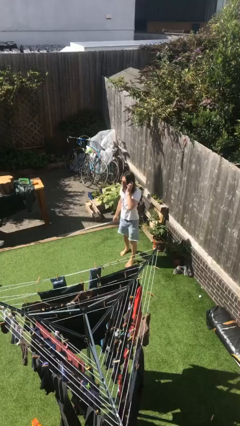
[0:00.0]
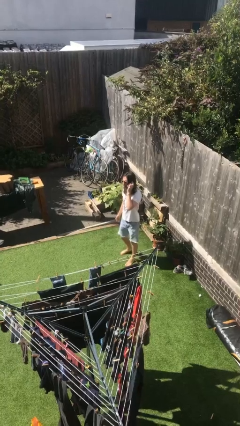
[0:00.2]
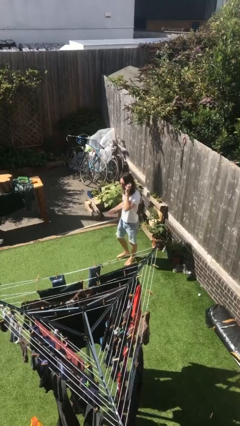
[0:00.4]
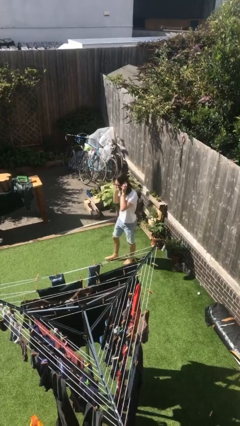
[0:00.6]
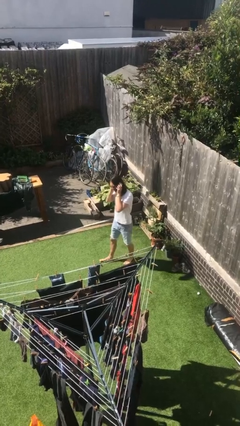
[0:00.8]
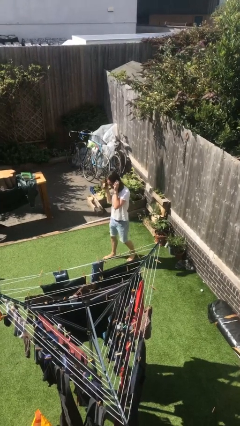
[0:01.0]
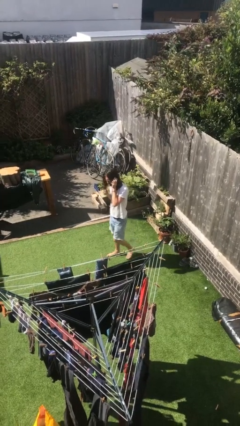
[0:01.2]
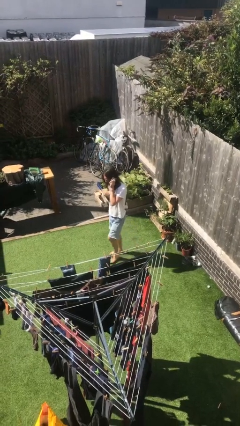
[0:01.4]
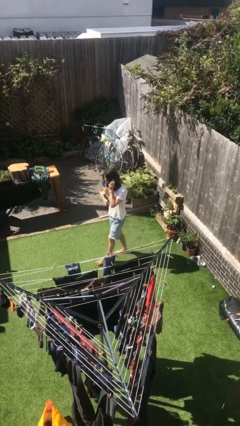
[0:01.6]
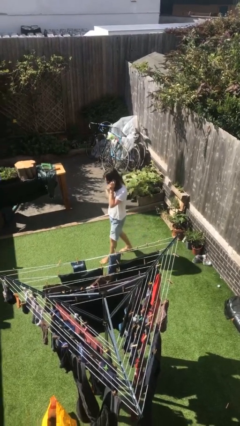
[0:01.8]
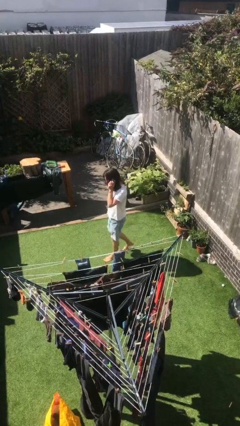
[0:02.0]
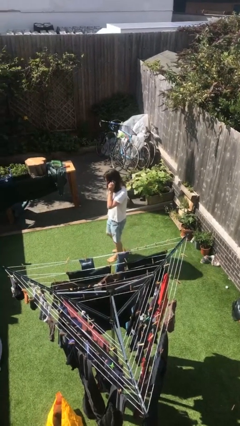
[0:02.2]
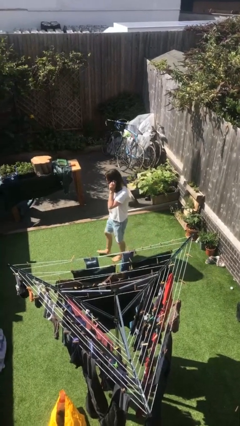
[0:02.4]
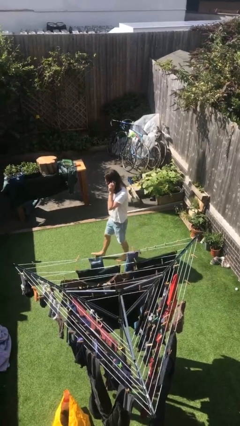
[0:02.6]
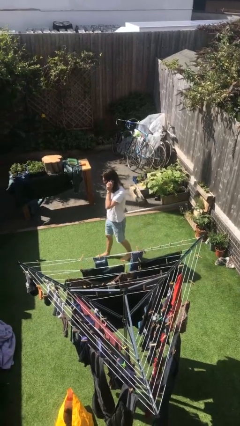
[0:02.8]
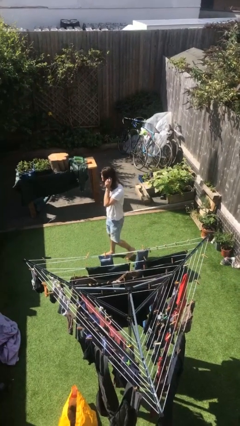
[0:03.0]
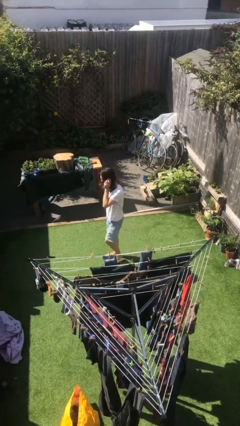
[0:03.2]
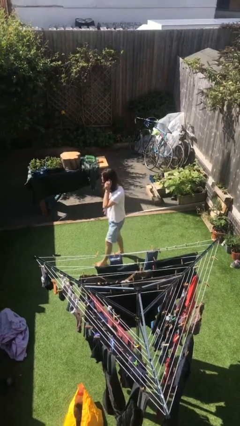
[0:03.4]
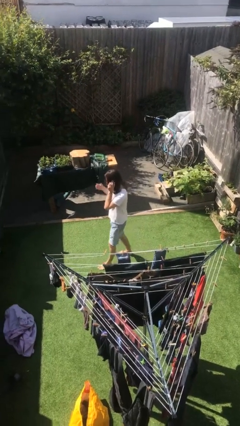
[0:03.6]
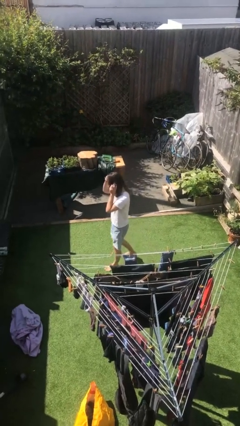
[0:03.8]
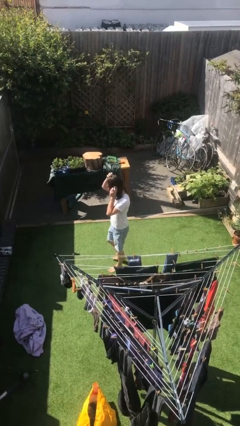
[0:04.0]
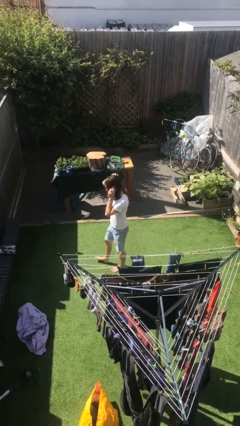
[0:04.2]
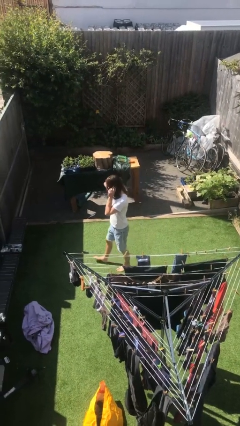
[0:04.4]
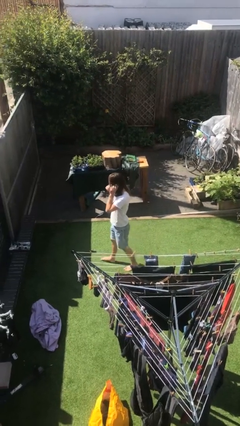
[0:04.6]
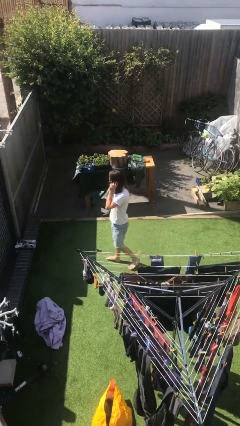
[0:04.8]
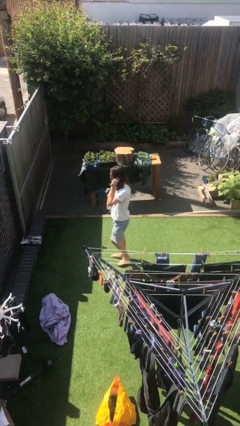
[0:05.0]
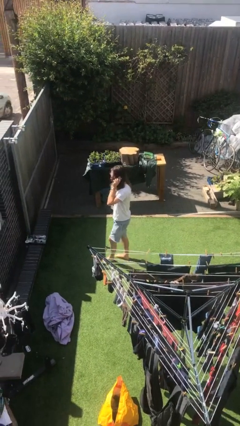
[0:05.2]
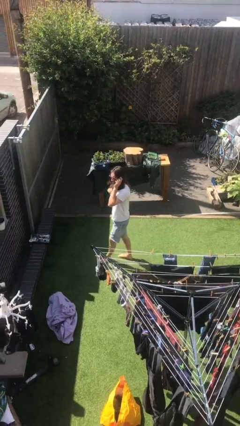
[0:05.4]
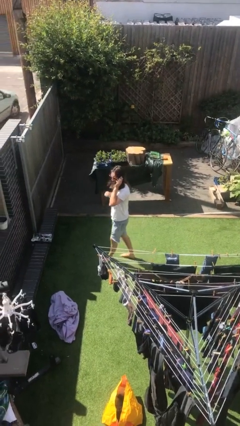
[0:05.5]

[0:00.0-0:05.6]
person talks on phone

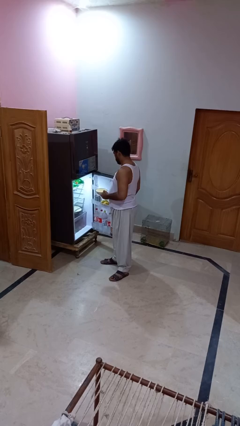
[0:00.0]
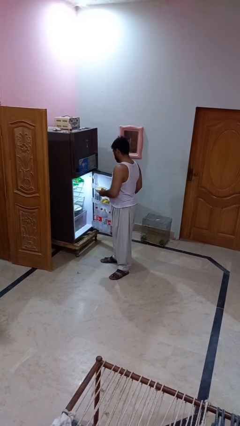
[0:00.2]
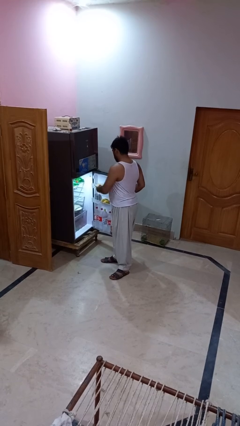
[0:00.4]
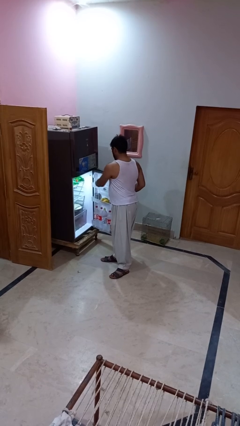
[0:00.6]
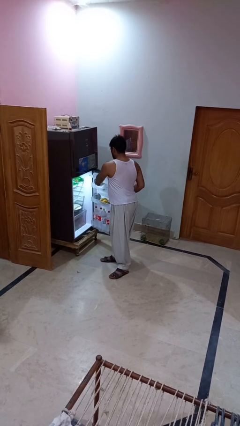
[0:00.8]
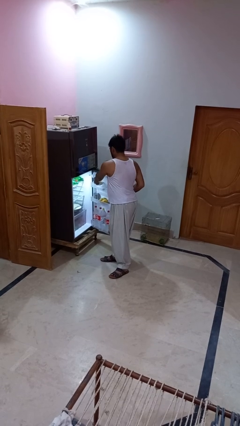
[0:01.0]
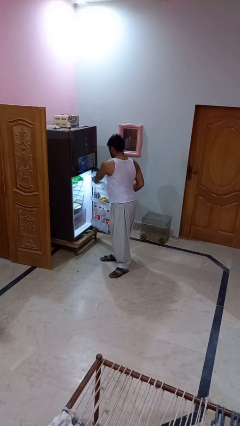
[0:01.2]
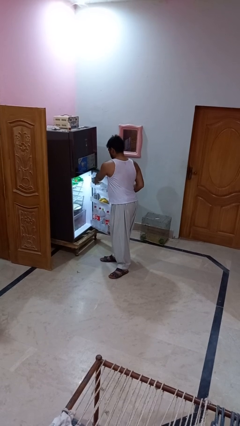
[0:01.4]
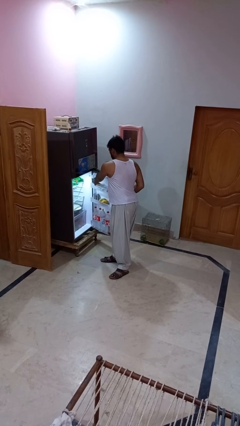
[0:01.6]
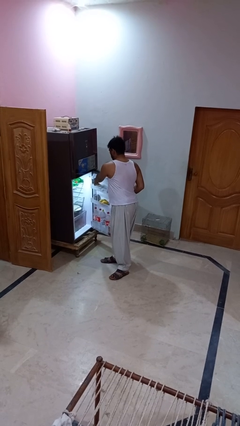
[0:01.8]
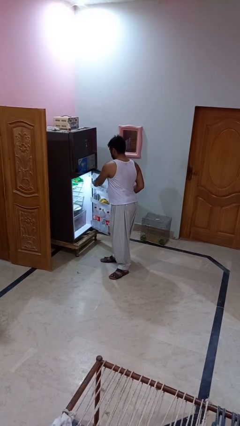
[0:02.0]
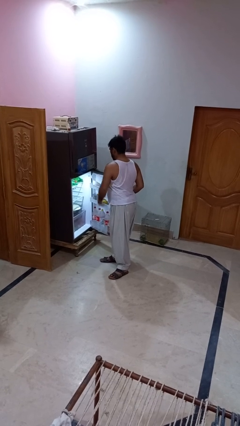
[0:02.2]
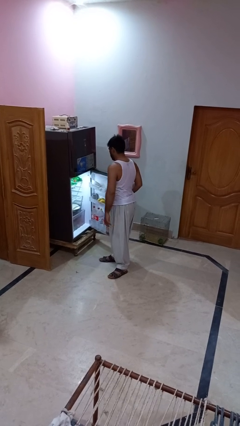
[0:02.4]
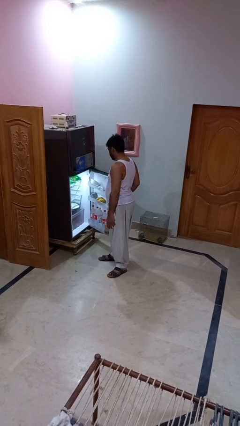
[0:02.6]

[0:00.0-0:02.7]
person puts object into refrigerator

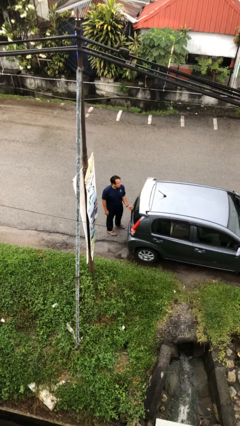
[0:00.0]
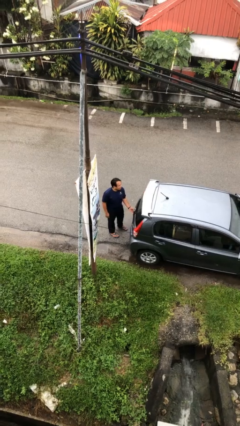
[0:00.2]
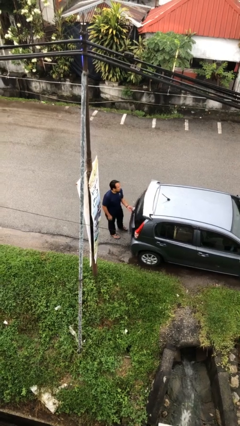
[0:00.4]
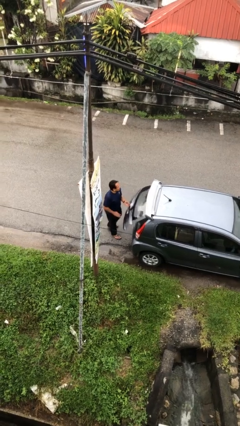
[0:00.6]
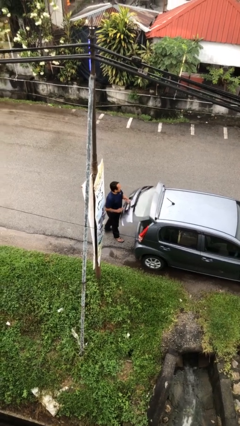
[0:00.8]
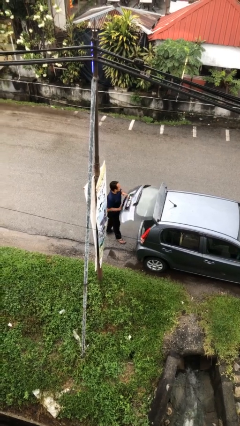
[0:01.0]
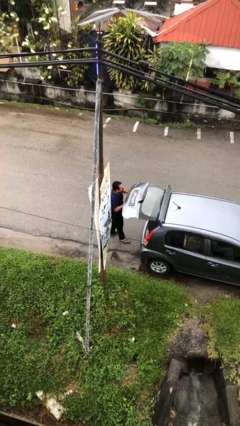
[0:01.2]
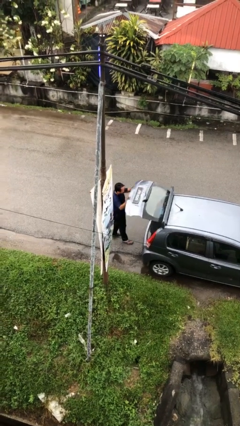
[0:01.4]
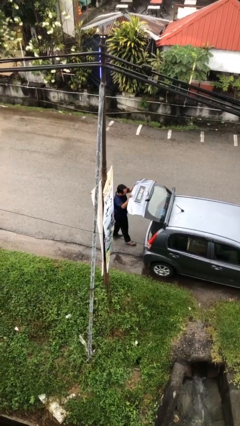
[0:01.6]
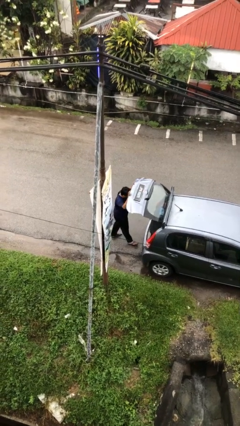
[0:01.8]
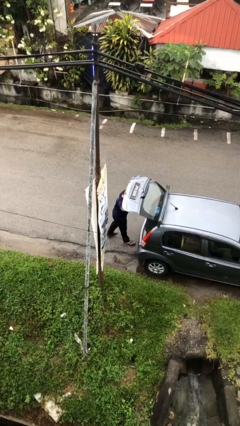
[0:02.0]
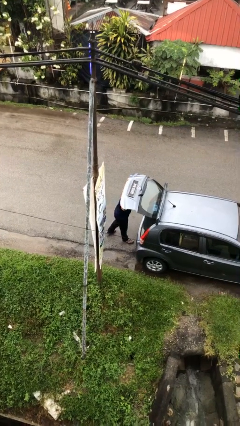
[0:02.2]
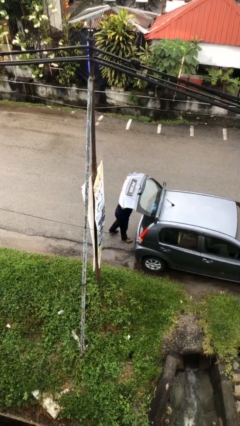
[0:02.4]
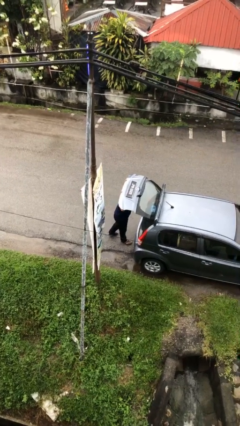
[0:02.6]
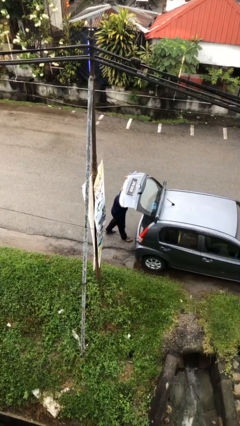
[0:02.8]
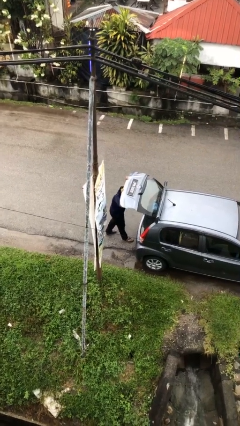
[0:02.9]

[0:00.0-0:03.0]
person opens car trunk

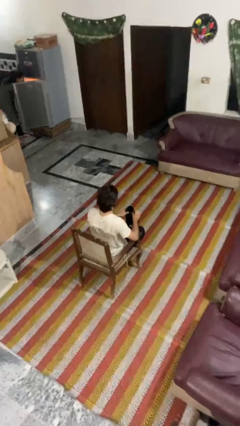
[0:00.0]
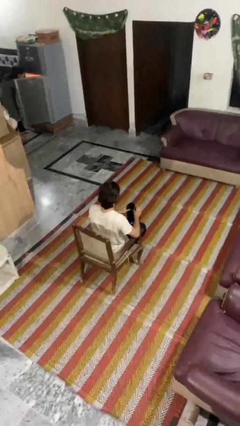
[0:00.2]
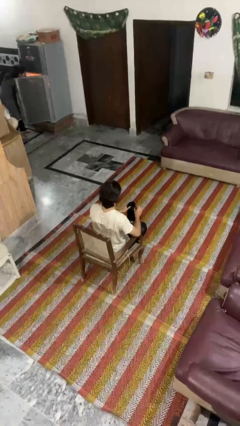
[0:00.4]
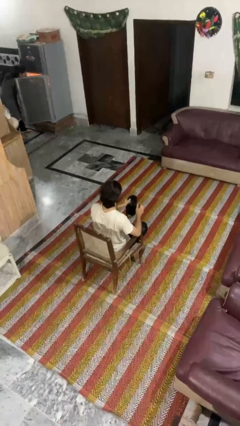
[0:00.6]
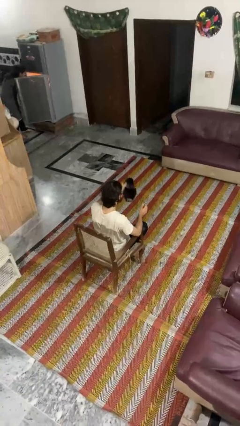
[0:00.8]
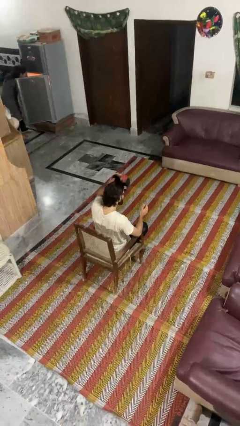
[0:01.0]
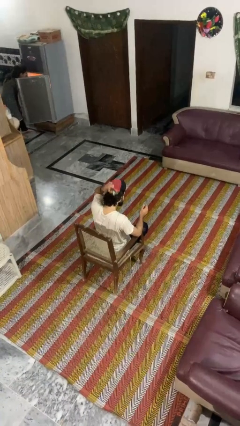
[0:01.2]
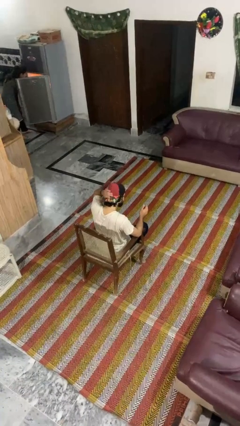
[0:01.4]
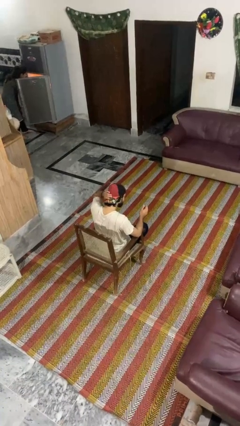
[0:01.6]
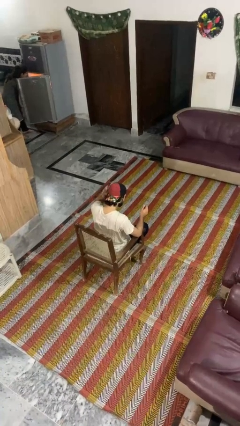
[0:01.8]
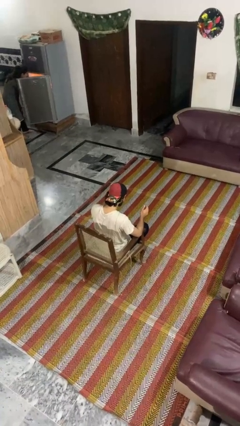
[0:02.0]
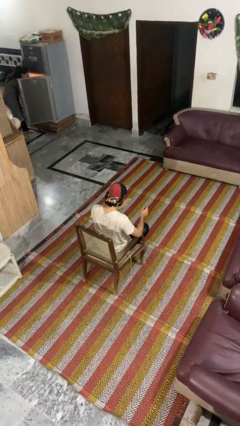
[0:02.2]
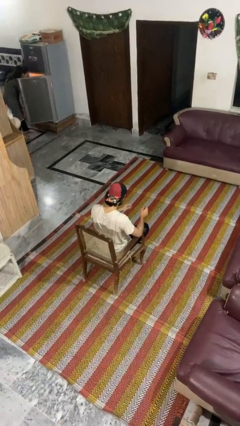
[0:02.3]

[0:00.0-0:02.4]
person puts on hat

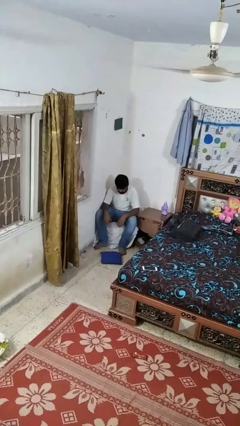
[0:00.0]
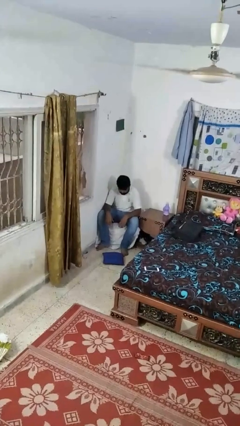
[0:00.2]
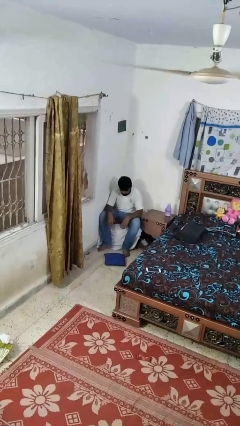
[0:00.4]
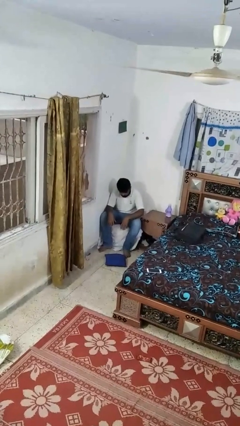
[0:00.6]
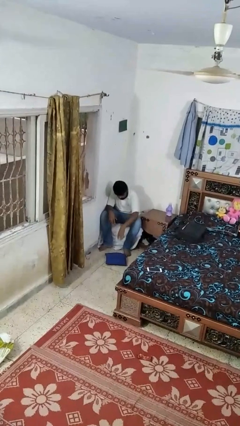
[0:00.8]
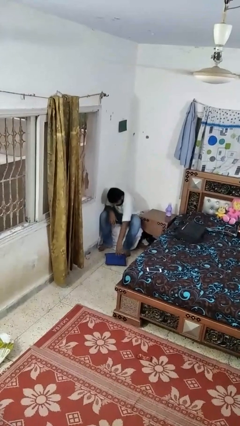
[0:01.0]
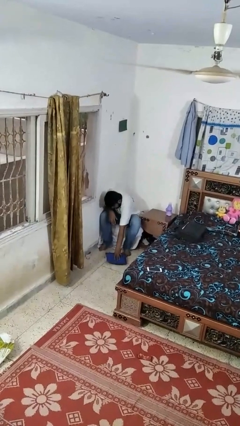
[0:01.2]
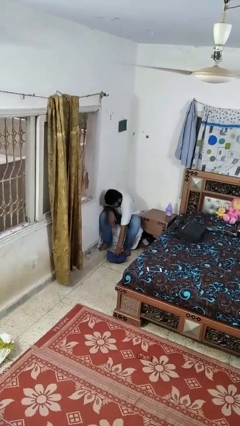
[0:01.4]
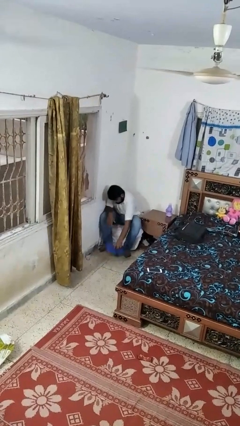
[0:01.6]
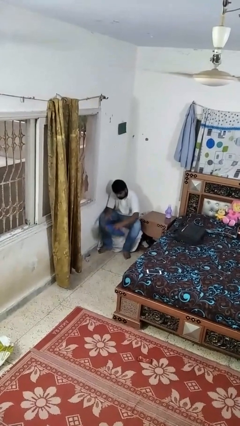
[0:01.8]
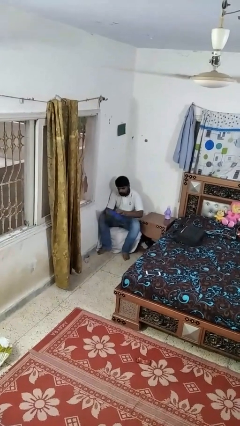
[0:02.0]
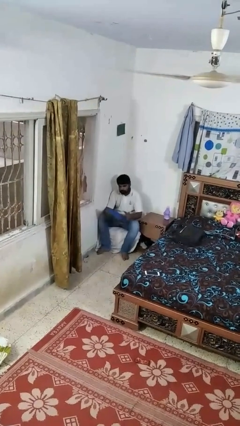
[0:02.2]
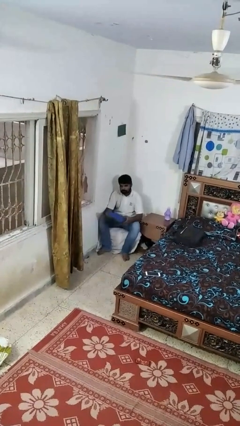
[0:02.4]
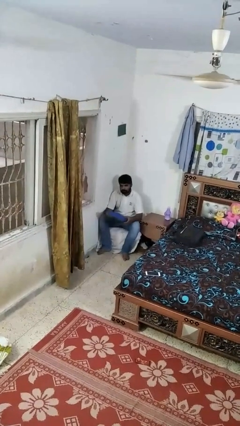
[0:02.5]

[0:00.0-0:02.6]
person picks up object from floor

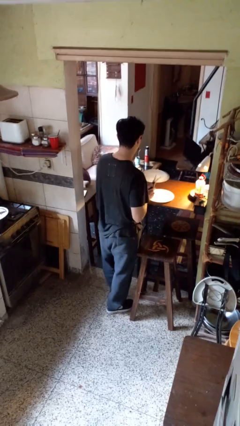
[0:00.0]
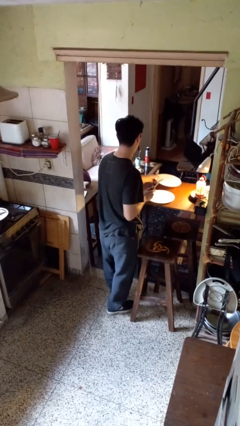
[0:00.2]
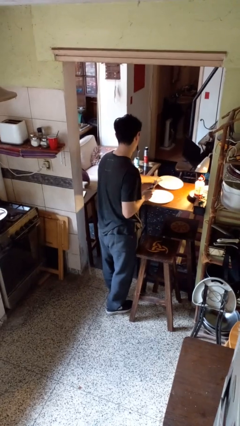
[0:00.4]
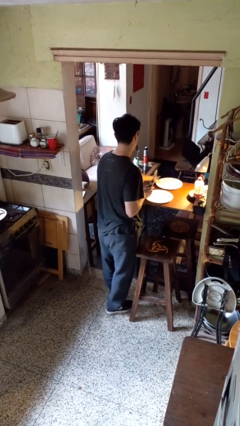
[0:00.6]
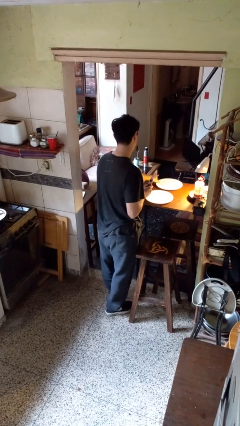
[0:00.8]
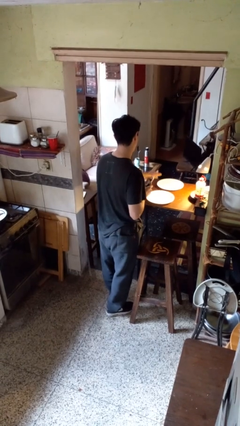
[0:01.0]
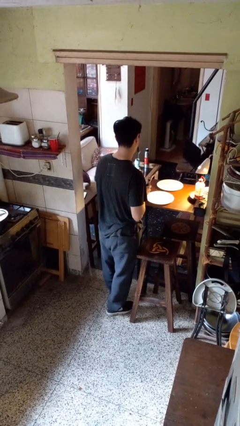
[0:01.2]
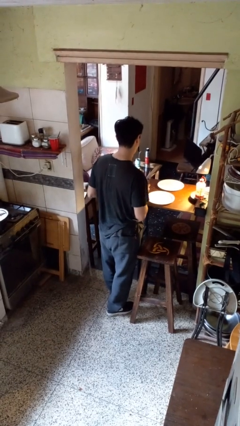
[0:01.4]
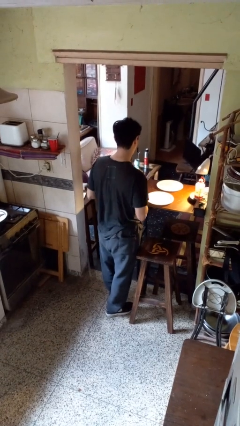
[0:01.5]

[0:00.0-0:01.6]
person sets table
